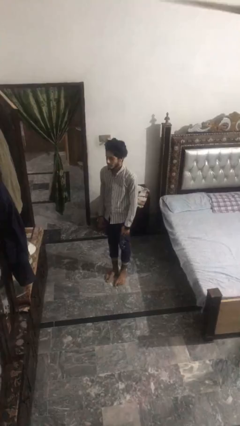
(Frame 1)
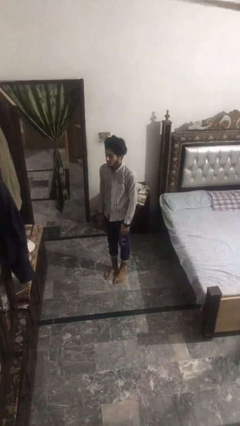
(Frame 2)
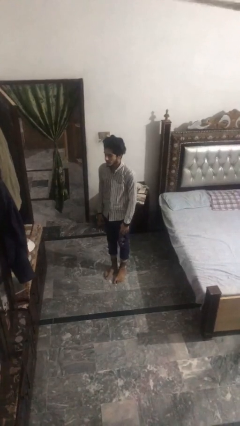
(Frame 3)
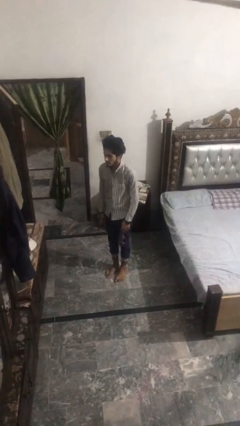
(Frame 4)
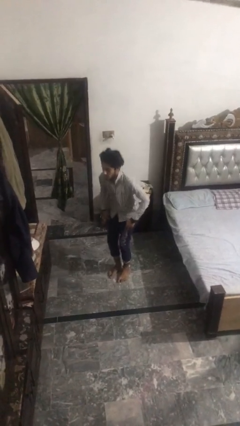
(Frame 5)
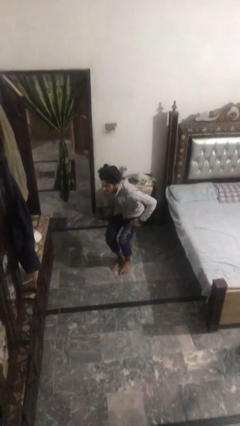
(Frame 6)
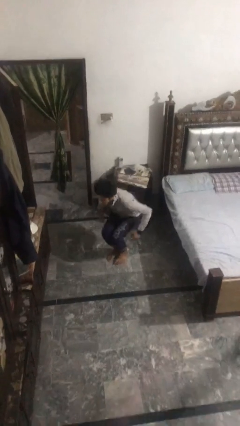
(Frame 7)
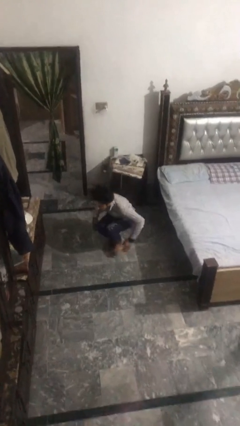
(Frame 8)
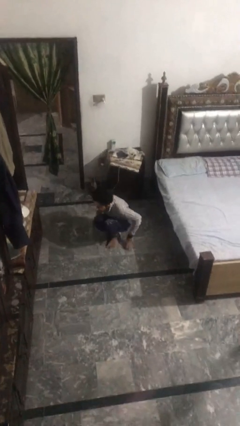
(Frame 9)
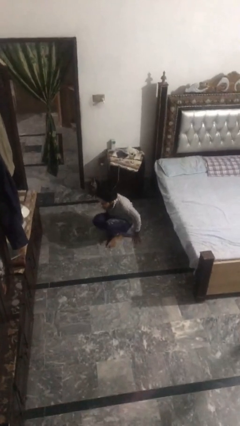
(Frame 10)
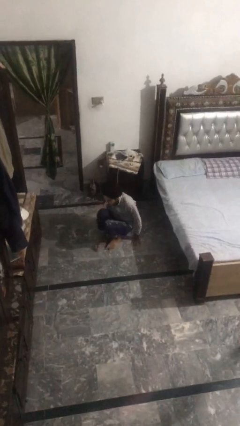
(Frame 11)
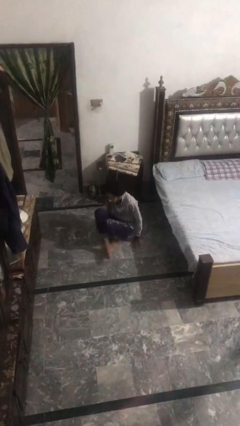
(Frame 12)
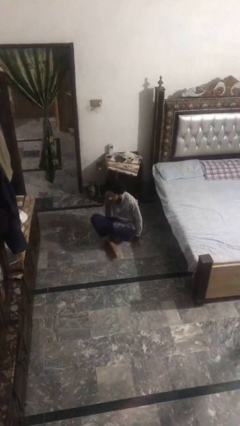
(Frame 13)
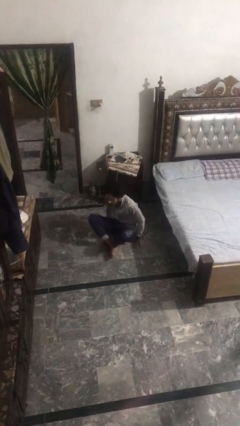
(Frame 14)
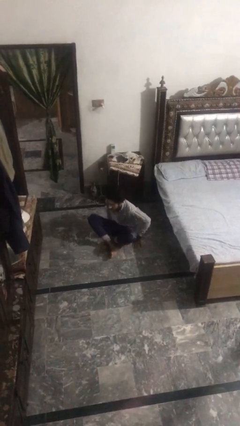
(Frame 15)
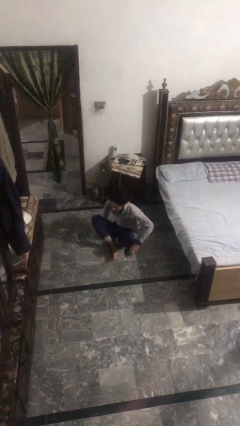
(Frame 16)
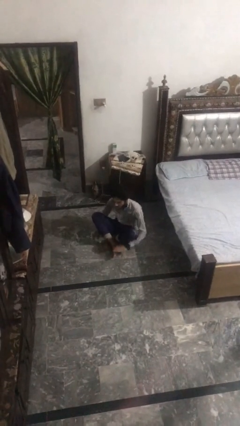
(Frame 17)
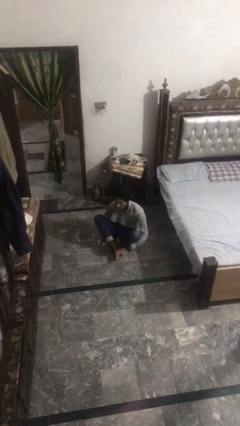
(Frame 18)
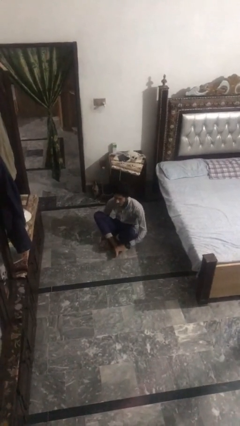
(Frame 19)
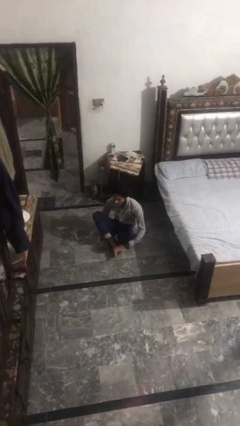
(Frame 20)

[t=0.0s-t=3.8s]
person sits crisscross

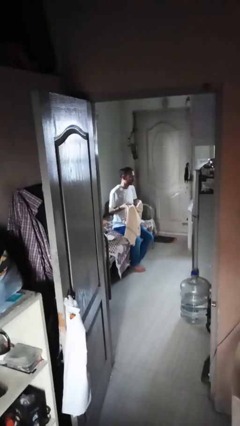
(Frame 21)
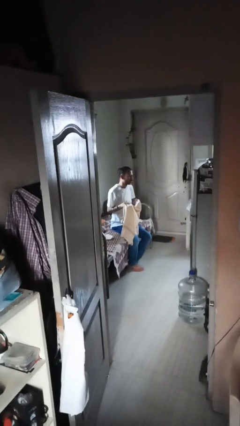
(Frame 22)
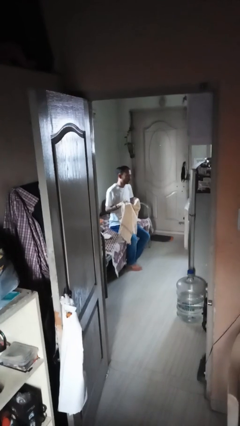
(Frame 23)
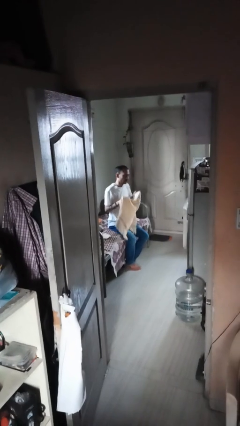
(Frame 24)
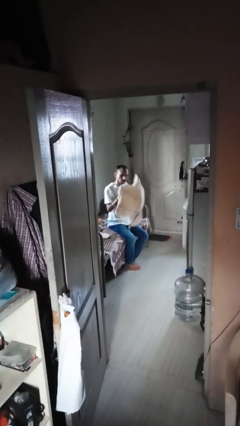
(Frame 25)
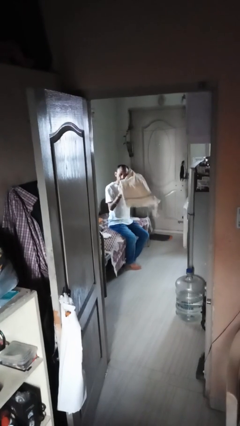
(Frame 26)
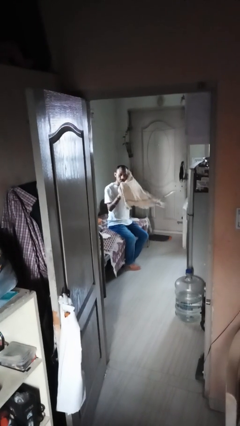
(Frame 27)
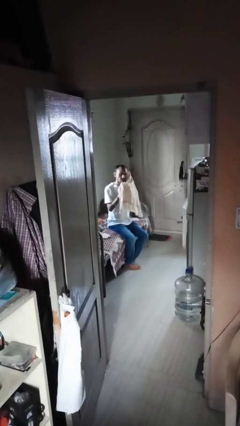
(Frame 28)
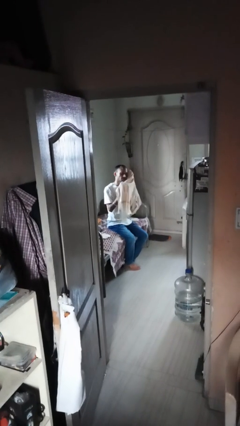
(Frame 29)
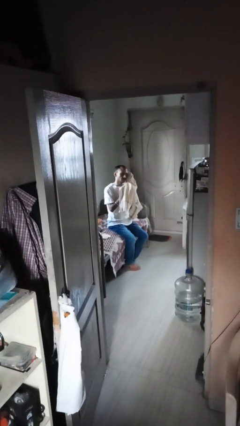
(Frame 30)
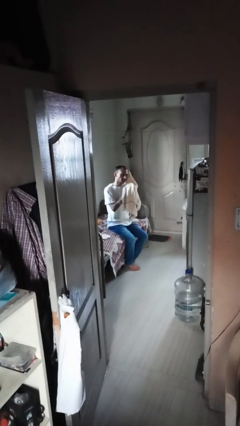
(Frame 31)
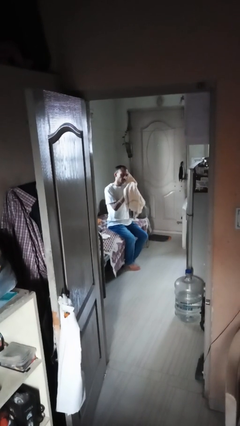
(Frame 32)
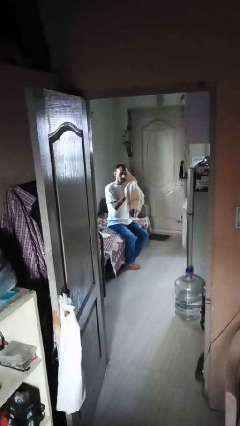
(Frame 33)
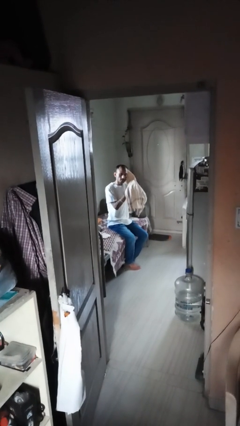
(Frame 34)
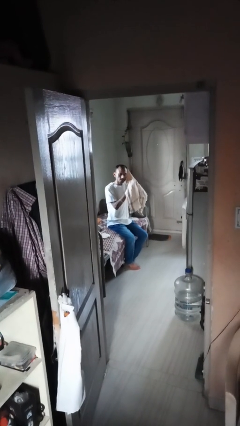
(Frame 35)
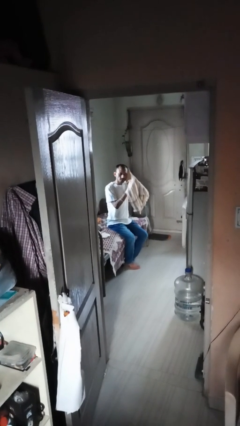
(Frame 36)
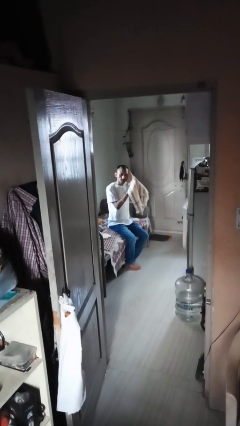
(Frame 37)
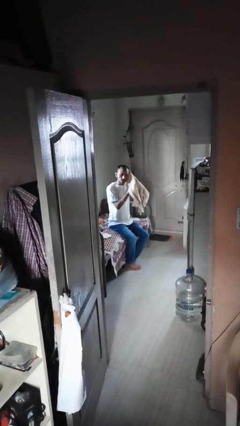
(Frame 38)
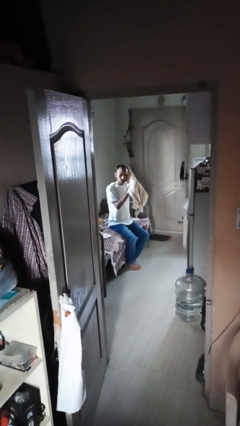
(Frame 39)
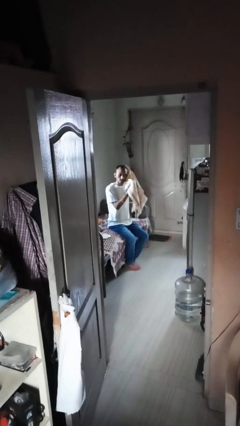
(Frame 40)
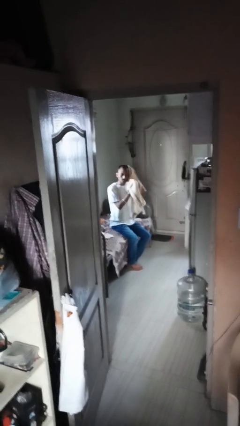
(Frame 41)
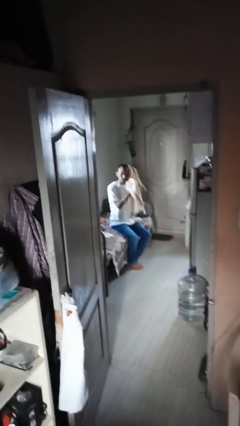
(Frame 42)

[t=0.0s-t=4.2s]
person dries hair with towel

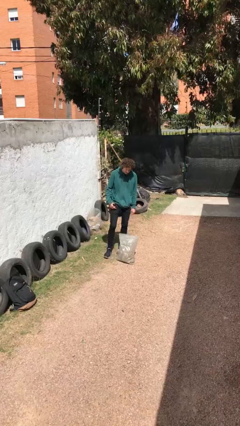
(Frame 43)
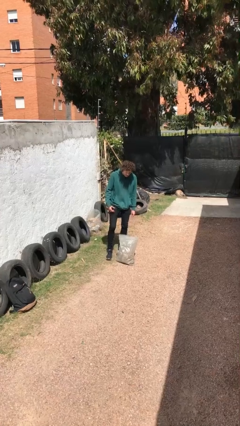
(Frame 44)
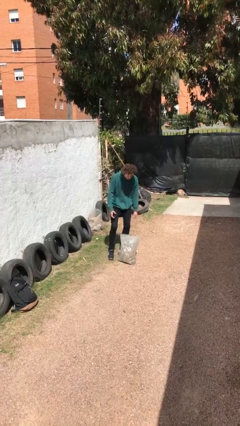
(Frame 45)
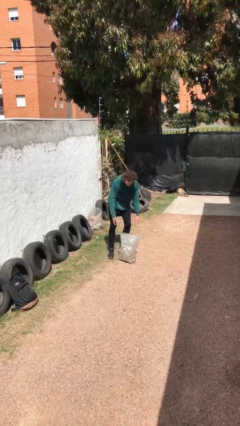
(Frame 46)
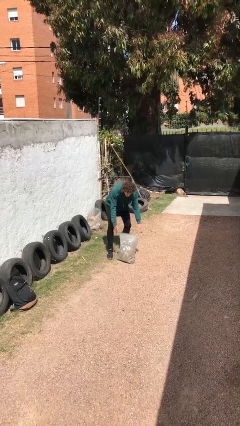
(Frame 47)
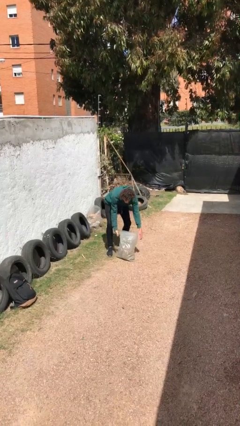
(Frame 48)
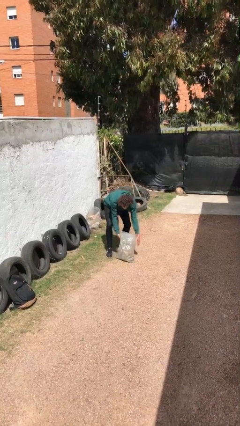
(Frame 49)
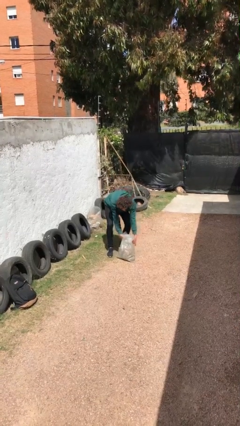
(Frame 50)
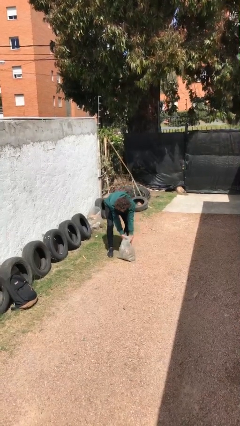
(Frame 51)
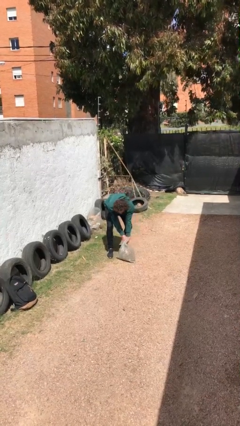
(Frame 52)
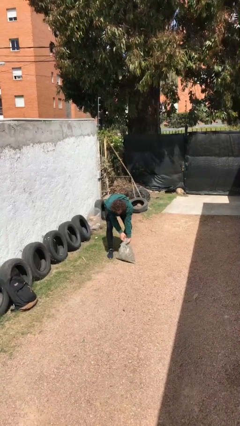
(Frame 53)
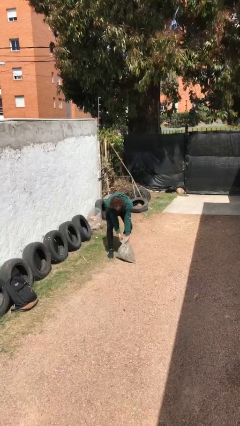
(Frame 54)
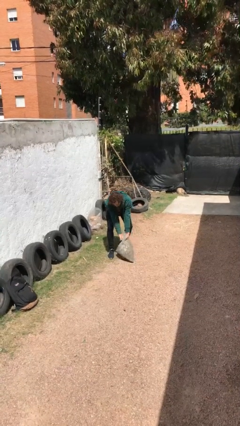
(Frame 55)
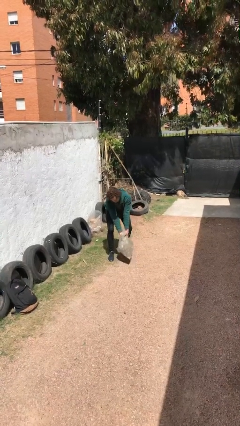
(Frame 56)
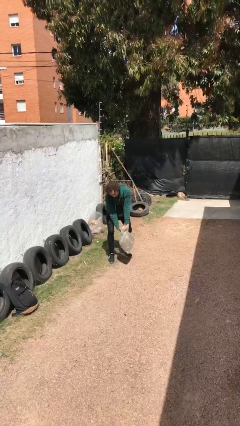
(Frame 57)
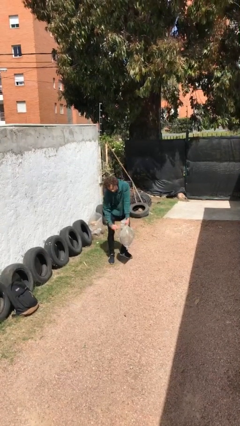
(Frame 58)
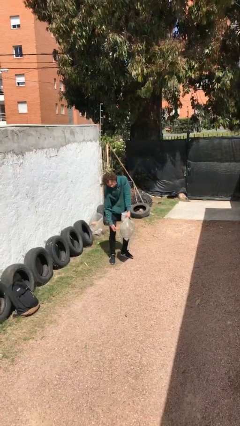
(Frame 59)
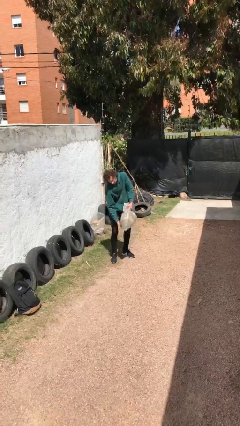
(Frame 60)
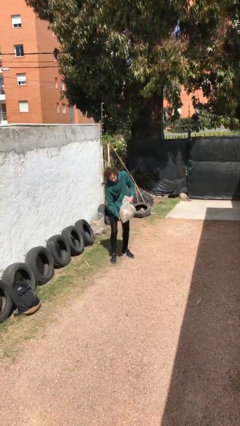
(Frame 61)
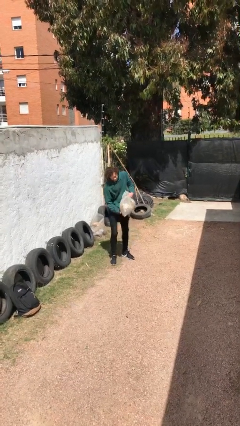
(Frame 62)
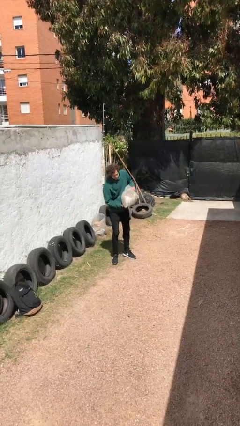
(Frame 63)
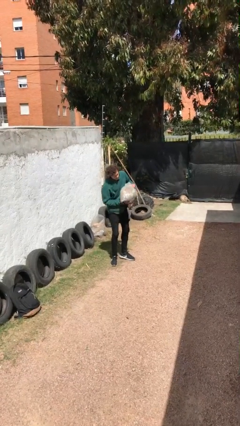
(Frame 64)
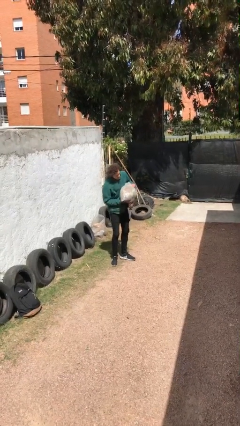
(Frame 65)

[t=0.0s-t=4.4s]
person picks up object from floor

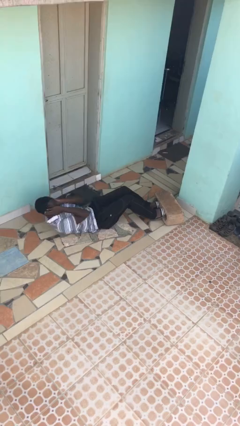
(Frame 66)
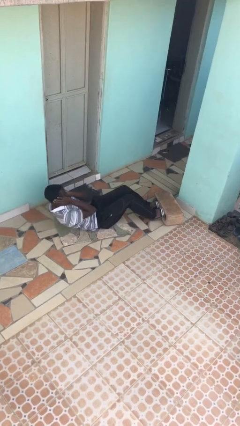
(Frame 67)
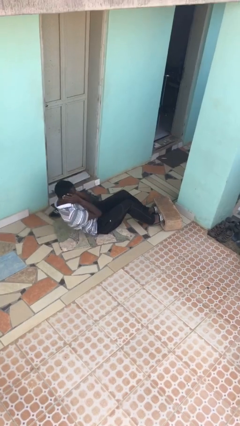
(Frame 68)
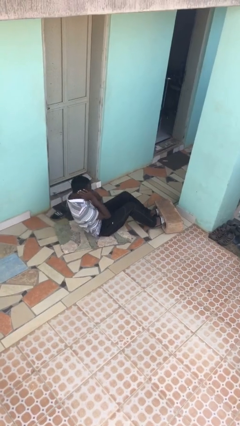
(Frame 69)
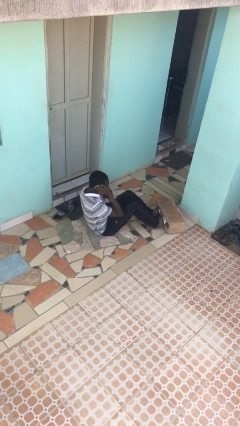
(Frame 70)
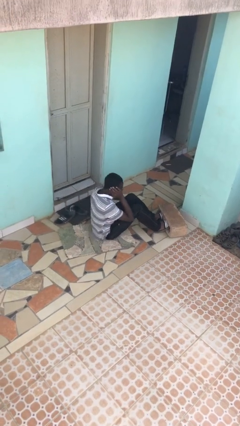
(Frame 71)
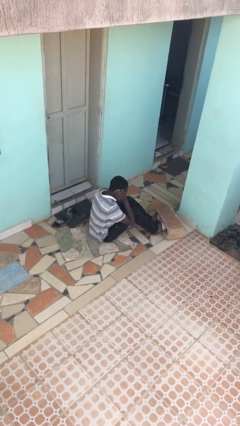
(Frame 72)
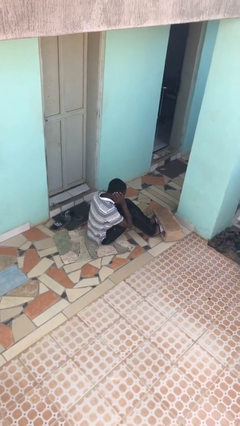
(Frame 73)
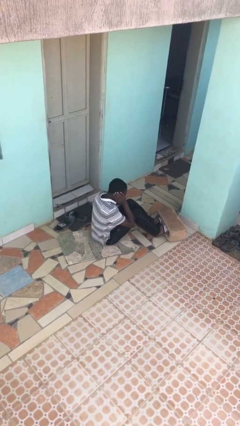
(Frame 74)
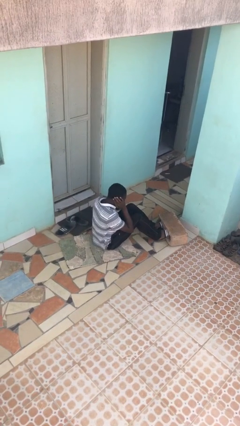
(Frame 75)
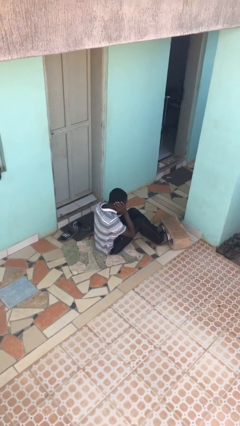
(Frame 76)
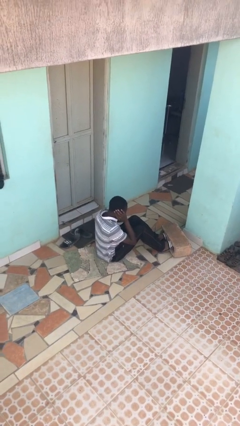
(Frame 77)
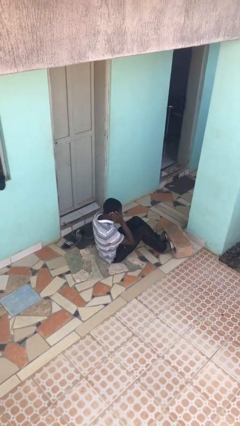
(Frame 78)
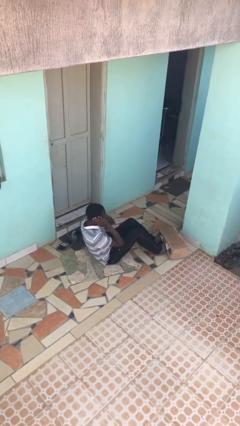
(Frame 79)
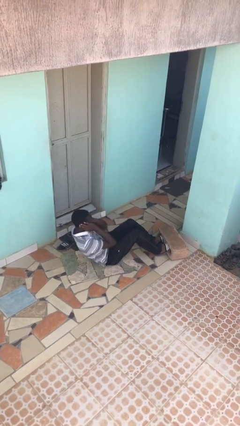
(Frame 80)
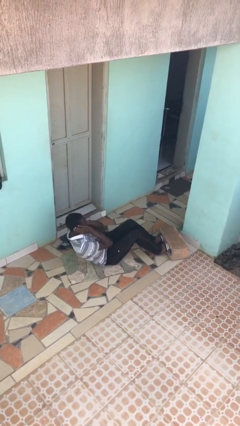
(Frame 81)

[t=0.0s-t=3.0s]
person exercises with situp

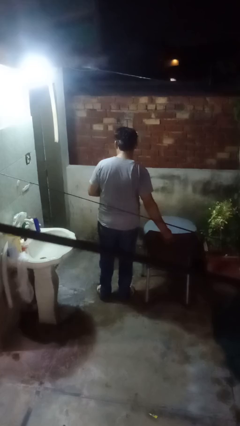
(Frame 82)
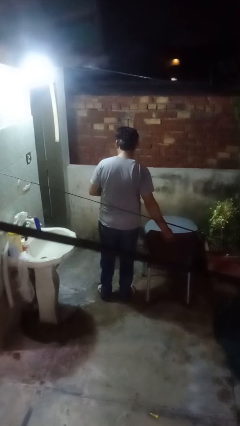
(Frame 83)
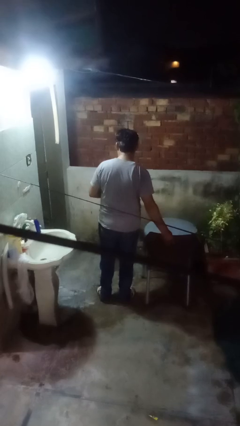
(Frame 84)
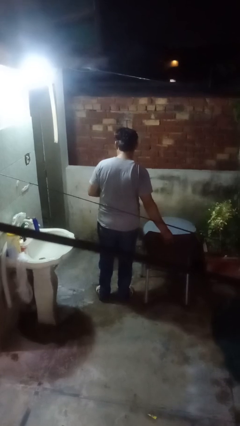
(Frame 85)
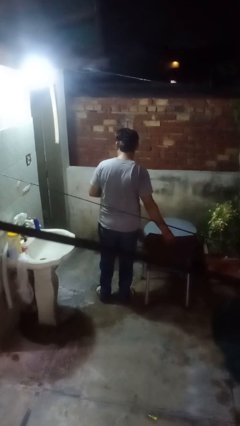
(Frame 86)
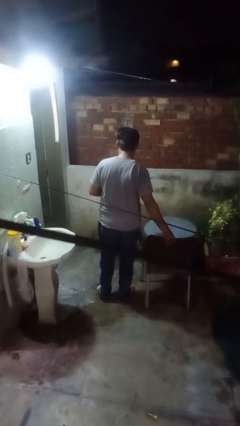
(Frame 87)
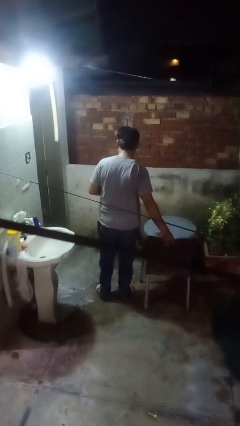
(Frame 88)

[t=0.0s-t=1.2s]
person pulls out chair

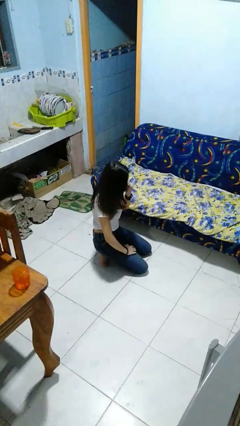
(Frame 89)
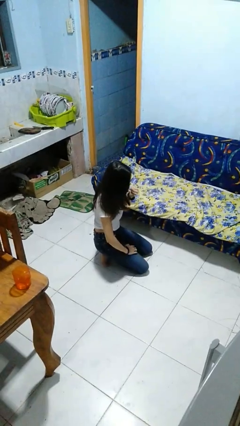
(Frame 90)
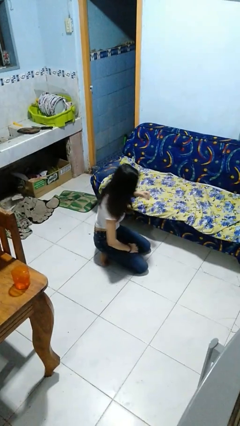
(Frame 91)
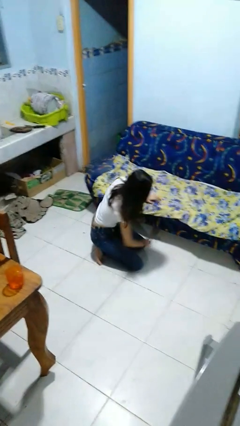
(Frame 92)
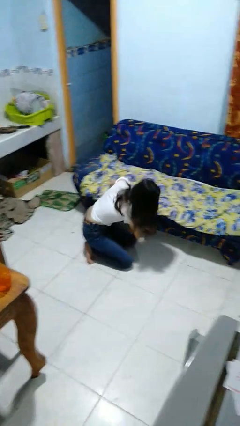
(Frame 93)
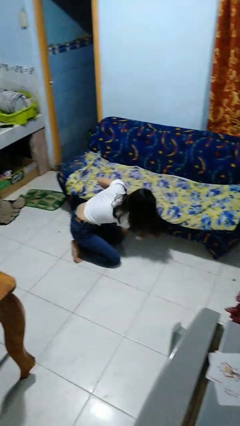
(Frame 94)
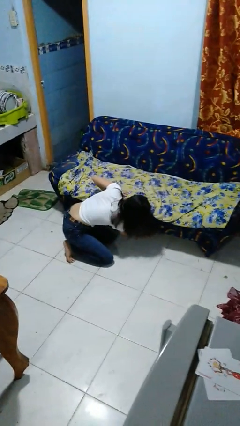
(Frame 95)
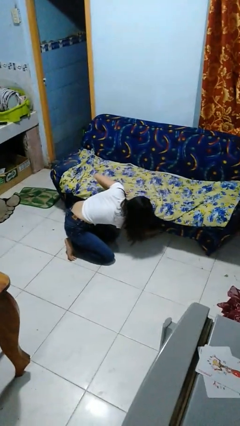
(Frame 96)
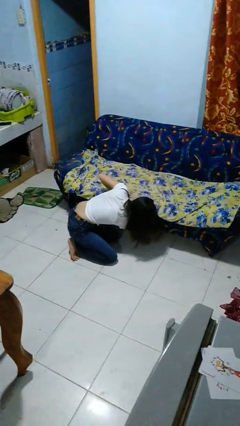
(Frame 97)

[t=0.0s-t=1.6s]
person searches under couch
